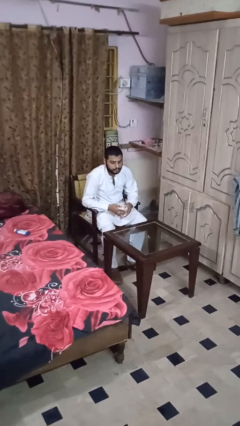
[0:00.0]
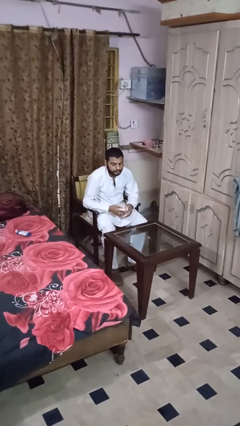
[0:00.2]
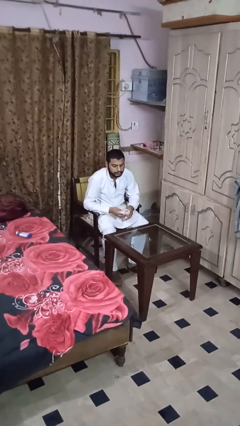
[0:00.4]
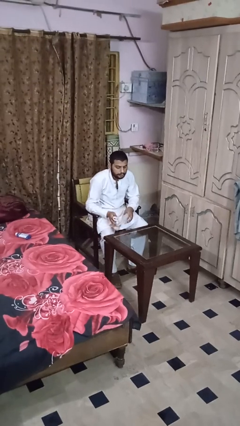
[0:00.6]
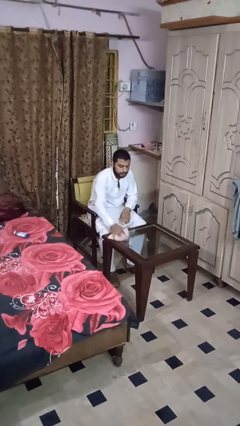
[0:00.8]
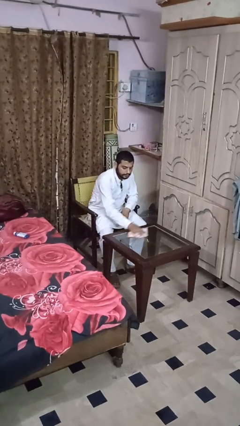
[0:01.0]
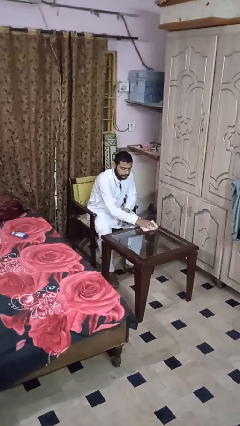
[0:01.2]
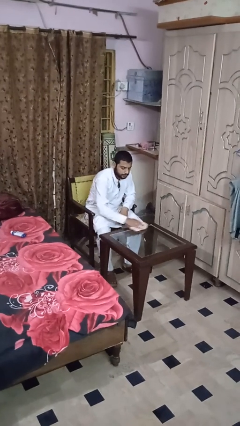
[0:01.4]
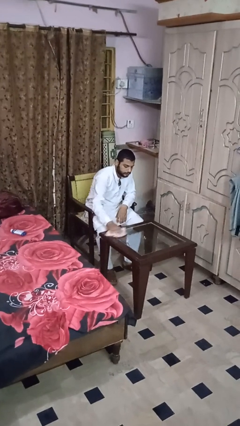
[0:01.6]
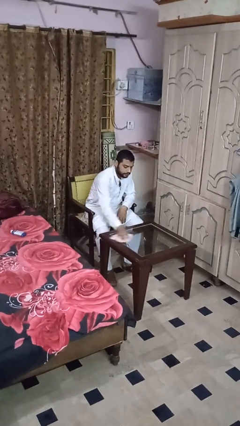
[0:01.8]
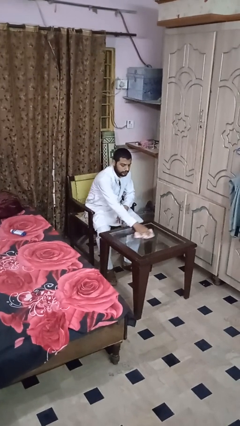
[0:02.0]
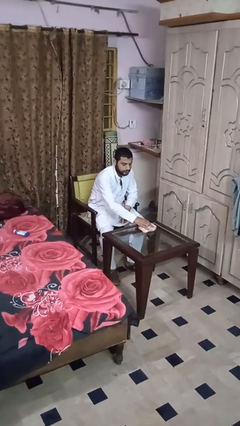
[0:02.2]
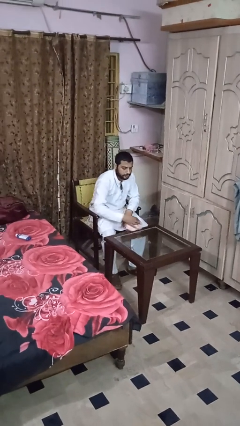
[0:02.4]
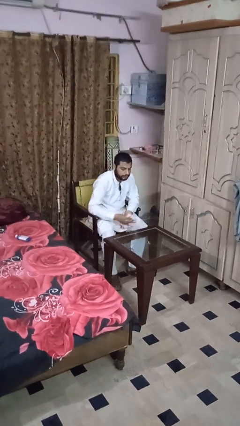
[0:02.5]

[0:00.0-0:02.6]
person cleans table with rag

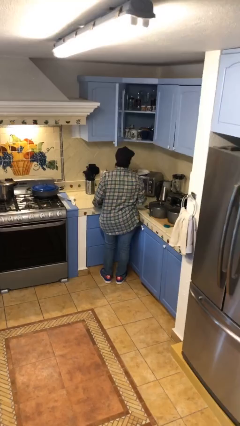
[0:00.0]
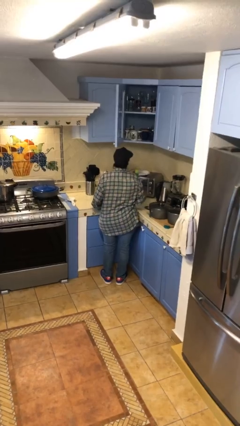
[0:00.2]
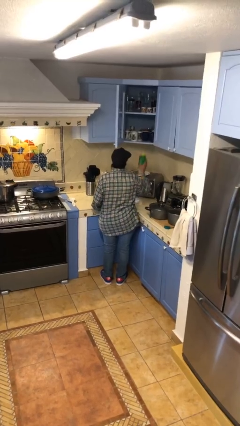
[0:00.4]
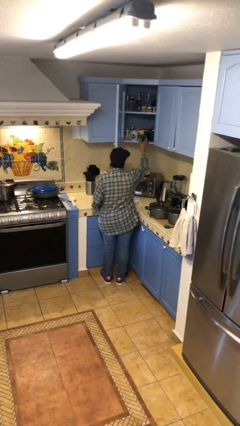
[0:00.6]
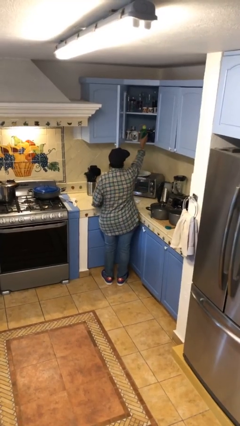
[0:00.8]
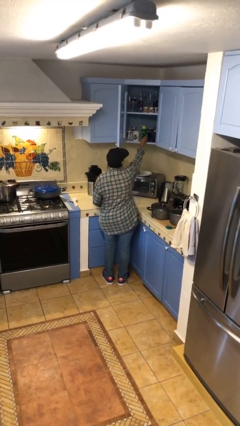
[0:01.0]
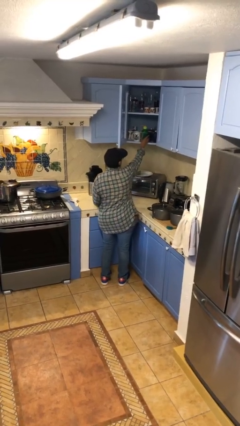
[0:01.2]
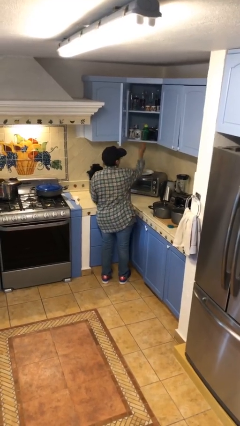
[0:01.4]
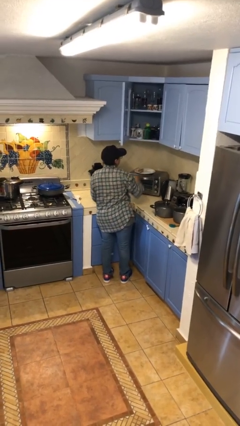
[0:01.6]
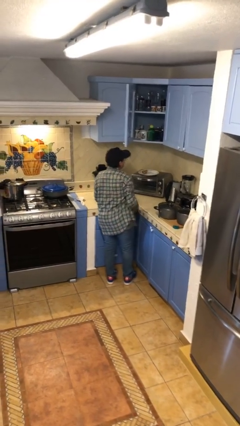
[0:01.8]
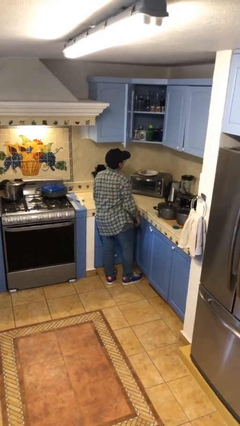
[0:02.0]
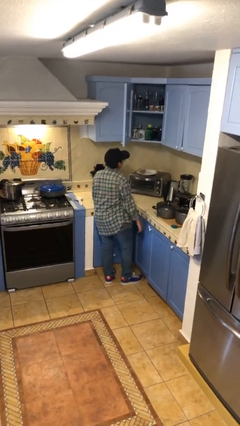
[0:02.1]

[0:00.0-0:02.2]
person puts down object into cabinet

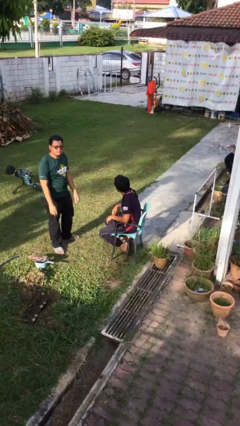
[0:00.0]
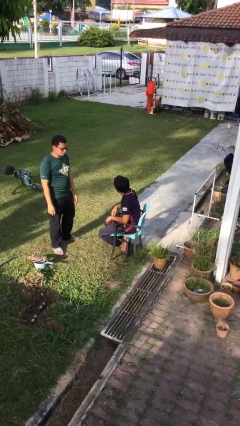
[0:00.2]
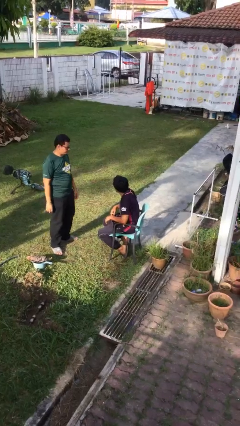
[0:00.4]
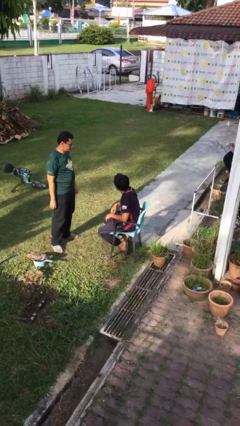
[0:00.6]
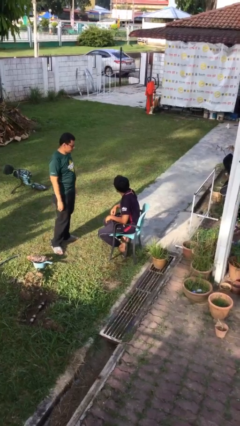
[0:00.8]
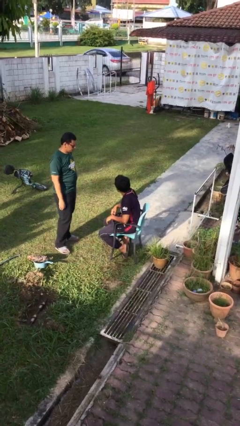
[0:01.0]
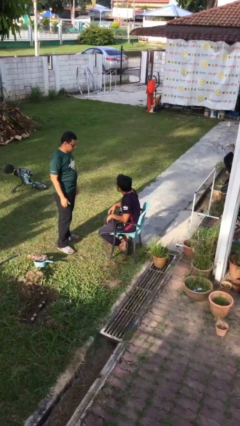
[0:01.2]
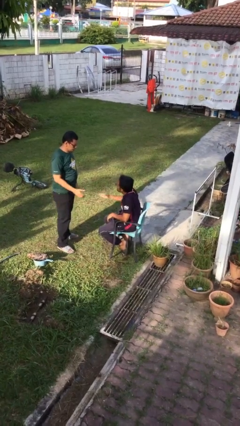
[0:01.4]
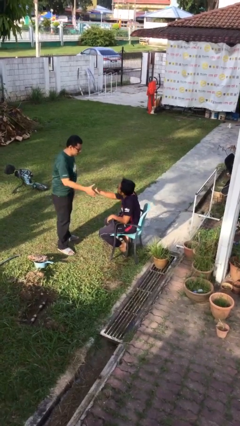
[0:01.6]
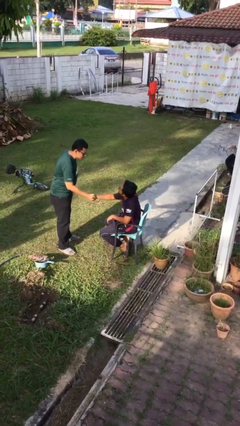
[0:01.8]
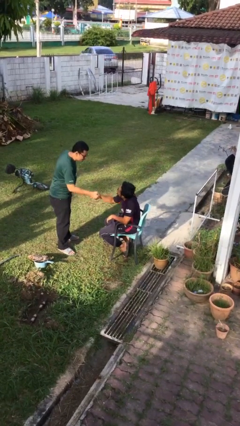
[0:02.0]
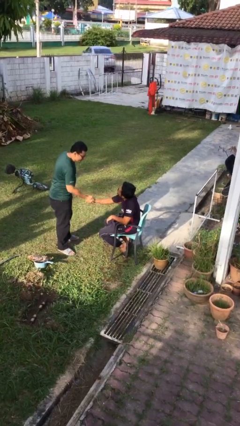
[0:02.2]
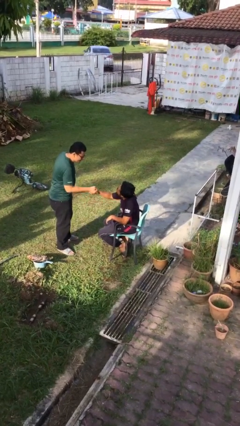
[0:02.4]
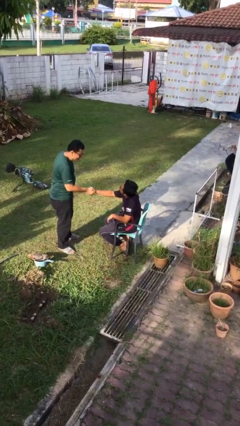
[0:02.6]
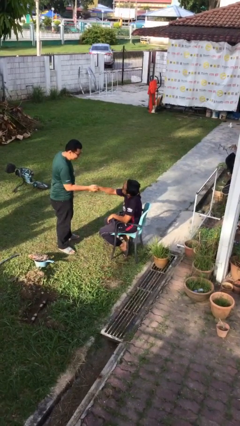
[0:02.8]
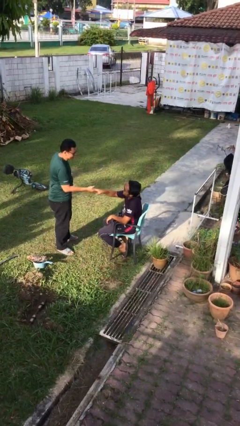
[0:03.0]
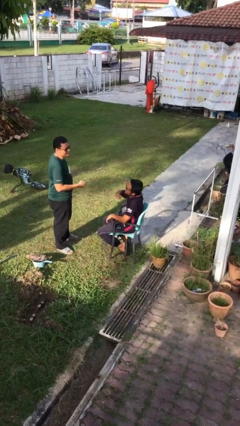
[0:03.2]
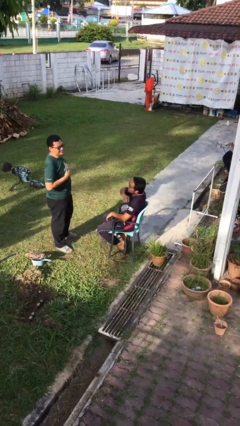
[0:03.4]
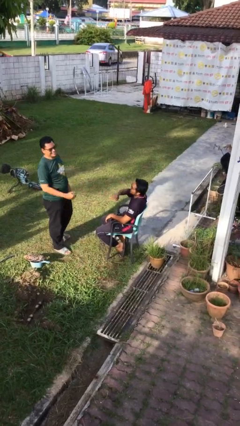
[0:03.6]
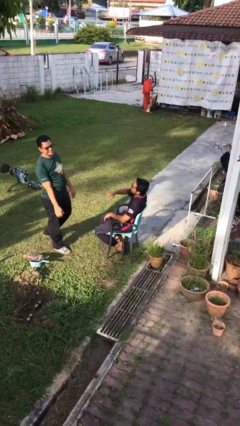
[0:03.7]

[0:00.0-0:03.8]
person shakes hand

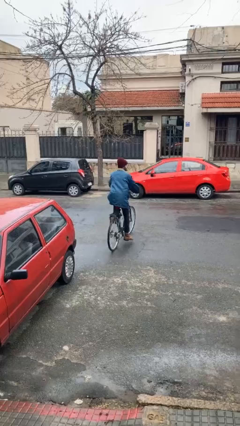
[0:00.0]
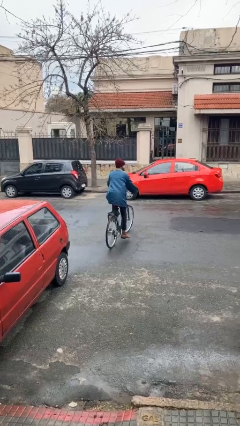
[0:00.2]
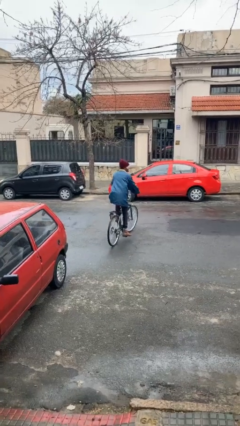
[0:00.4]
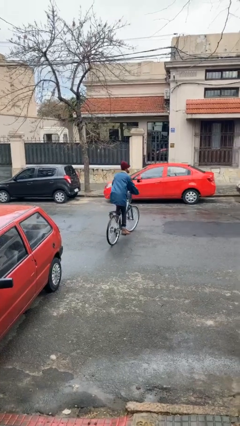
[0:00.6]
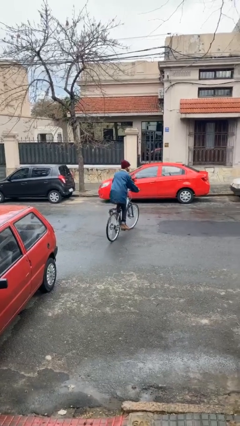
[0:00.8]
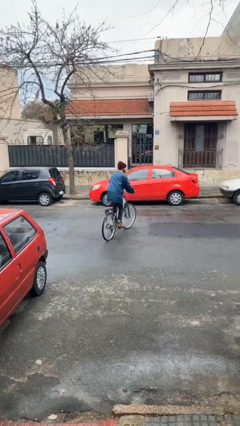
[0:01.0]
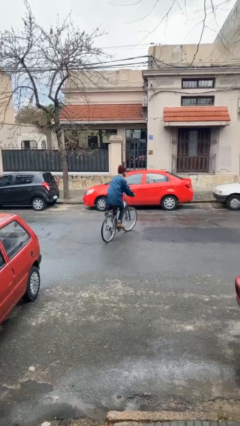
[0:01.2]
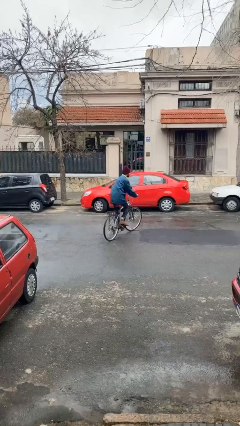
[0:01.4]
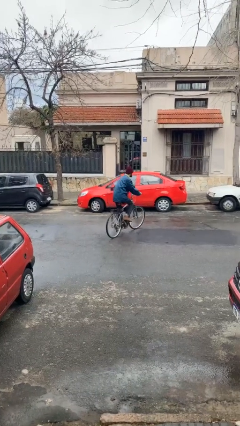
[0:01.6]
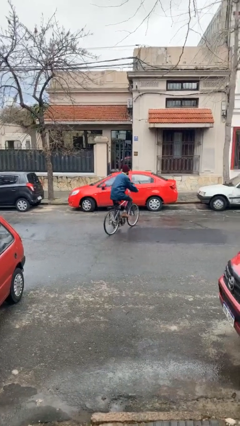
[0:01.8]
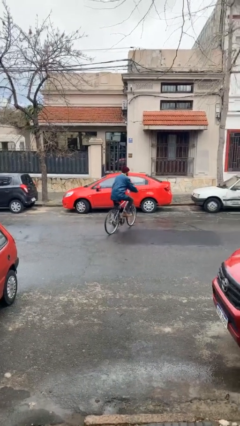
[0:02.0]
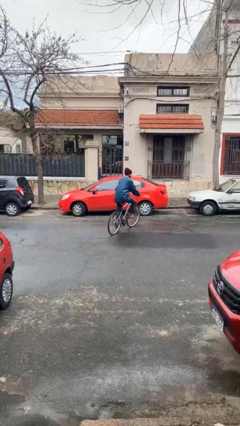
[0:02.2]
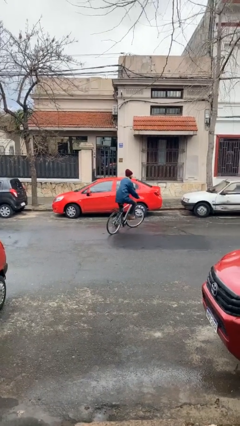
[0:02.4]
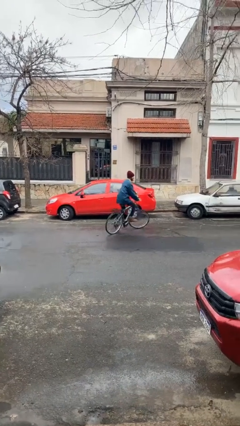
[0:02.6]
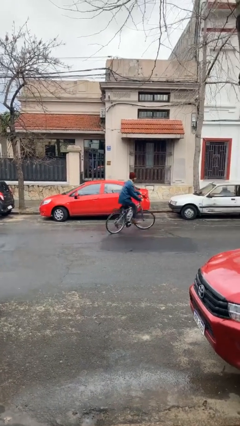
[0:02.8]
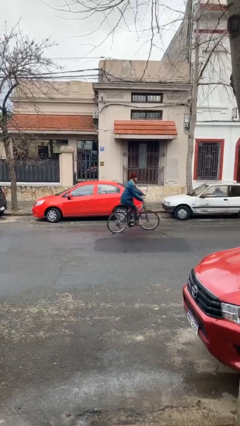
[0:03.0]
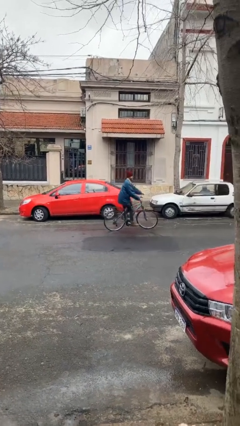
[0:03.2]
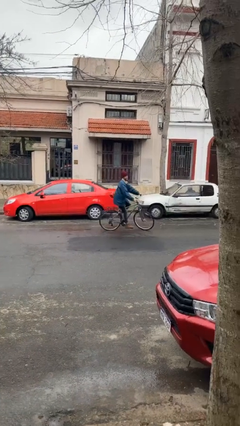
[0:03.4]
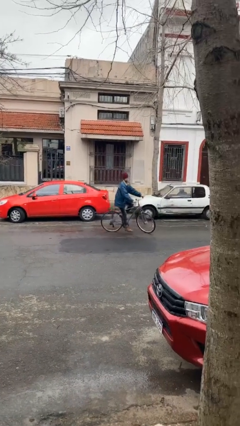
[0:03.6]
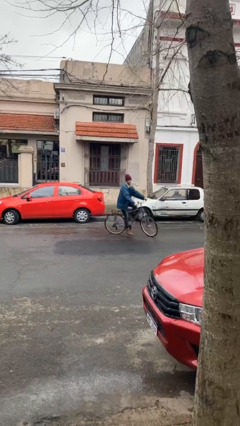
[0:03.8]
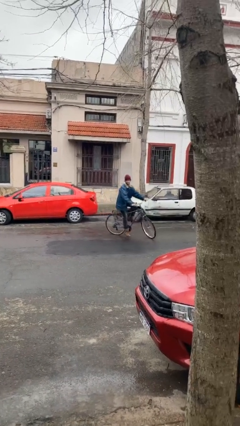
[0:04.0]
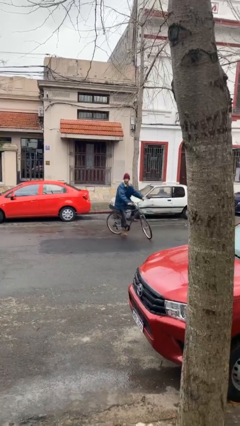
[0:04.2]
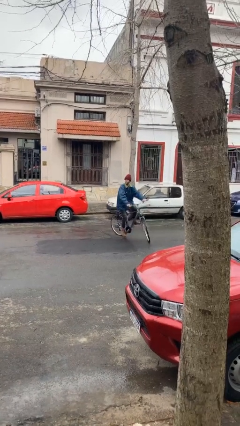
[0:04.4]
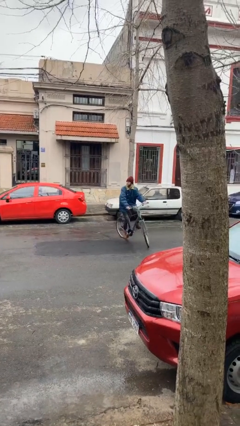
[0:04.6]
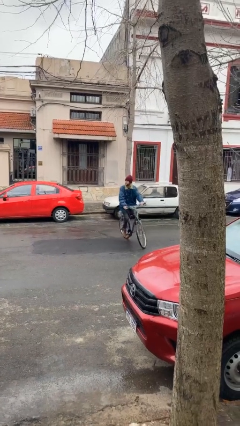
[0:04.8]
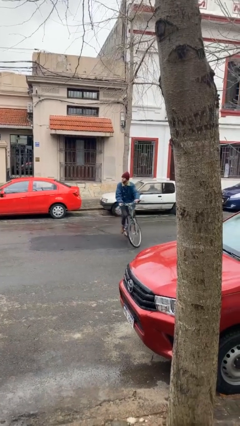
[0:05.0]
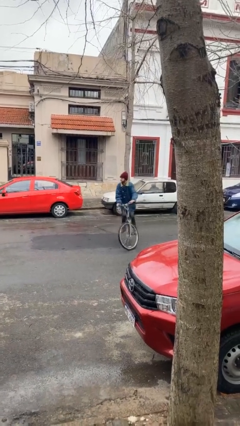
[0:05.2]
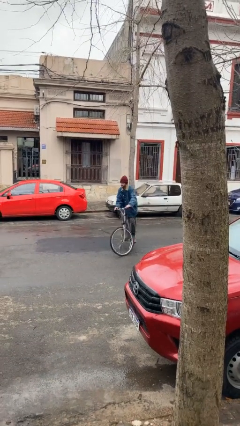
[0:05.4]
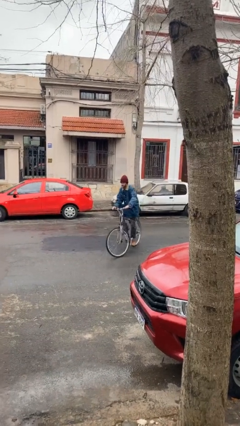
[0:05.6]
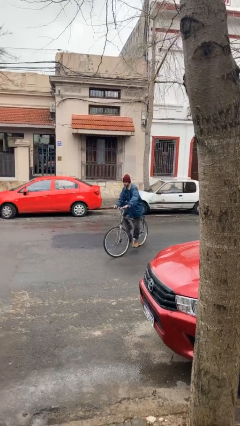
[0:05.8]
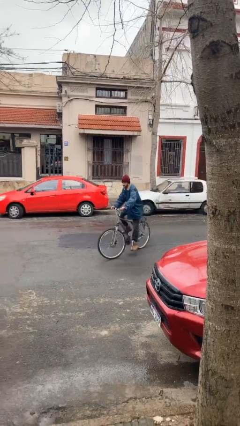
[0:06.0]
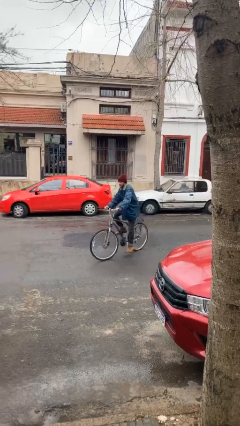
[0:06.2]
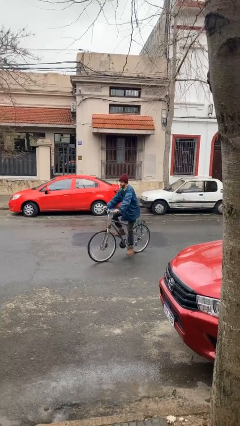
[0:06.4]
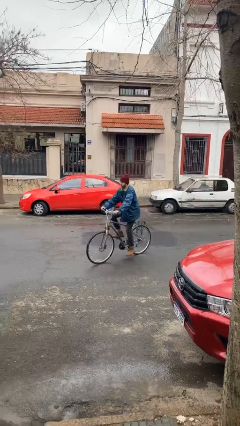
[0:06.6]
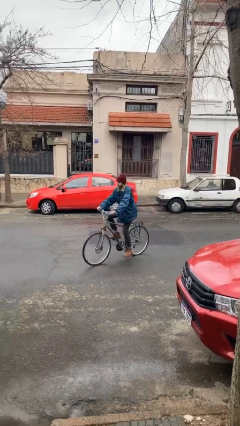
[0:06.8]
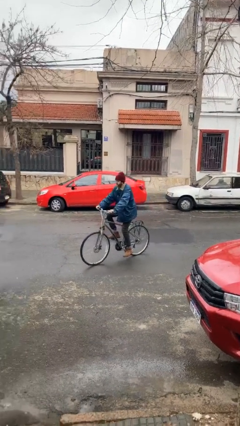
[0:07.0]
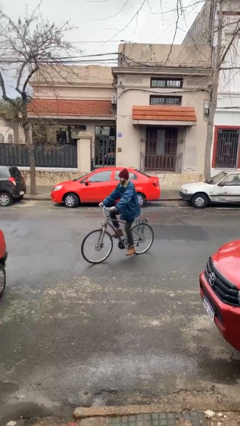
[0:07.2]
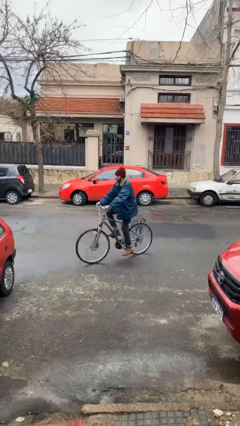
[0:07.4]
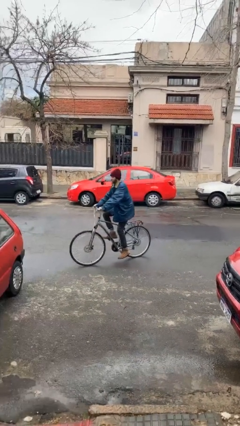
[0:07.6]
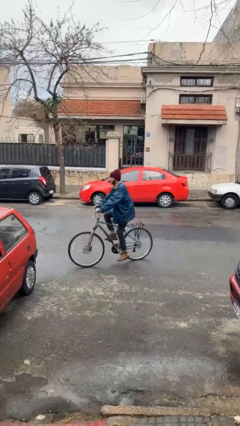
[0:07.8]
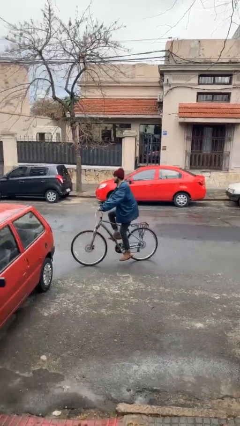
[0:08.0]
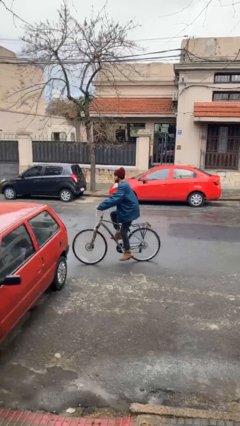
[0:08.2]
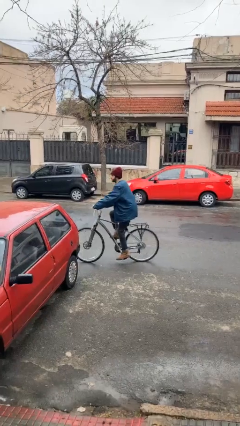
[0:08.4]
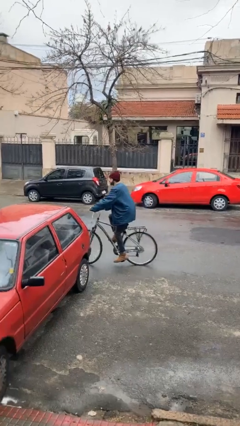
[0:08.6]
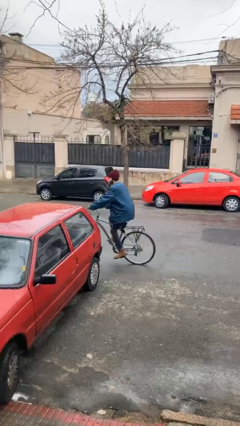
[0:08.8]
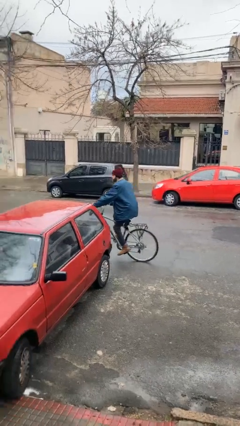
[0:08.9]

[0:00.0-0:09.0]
person rides bicycle
